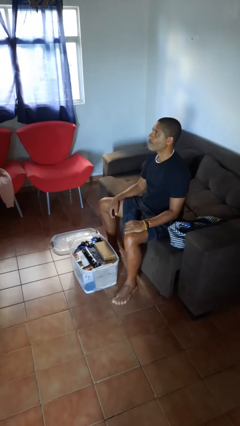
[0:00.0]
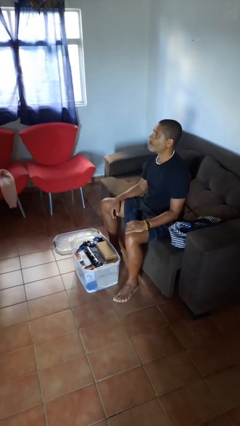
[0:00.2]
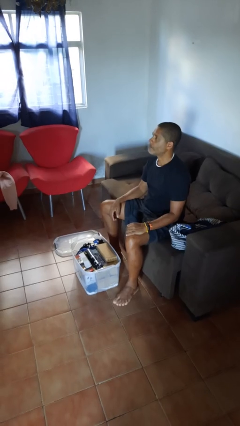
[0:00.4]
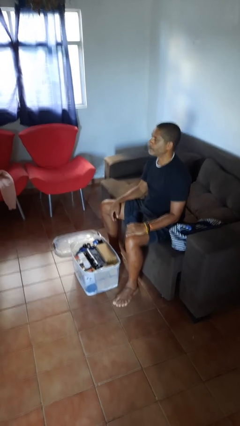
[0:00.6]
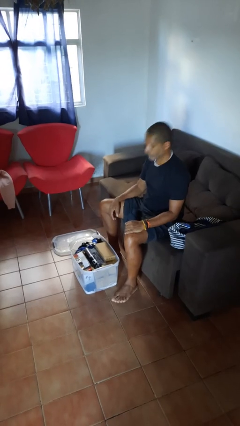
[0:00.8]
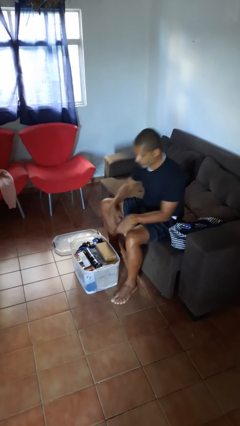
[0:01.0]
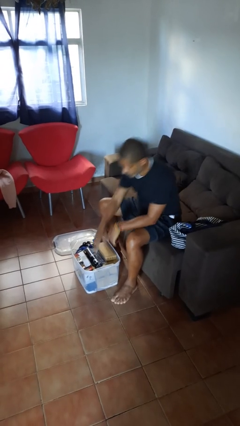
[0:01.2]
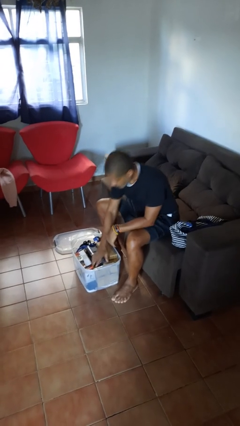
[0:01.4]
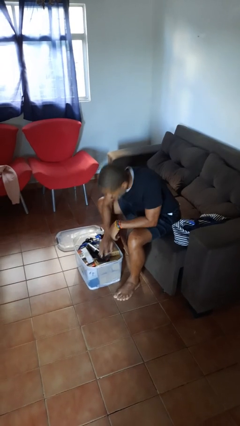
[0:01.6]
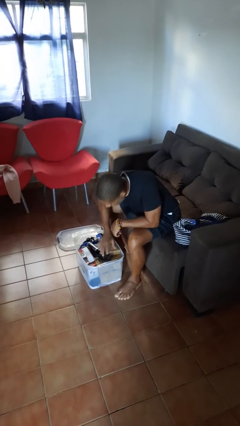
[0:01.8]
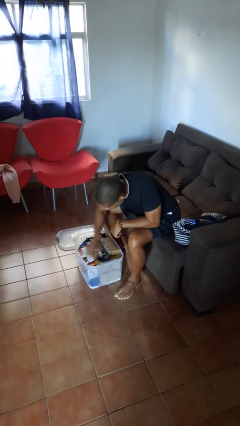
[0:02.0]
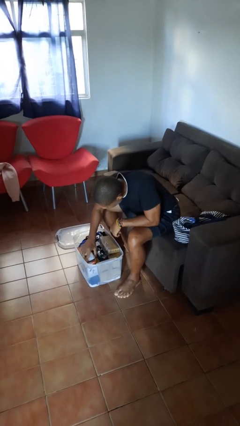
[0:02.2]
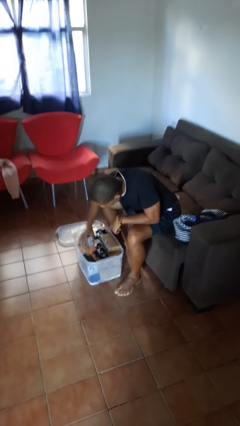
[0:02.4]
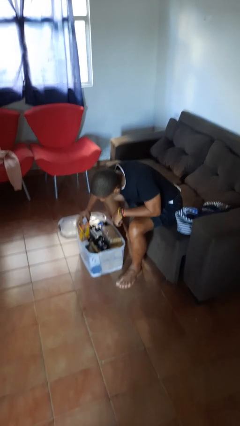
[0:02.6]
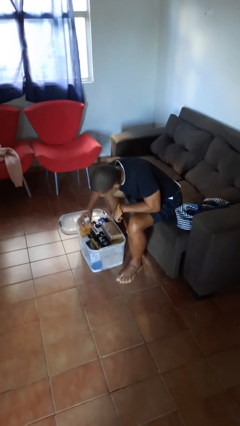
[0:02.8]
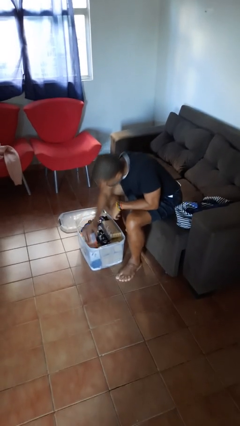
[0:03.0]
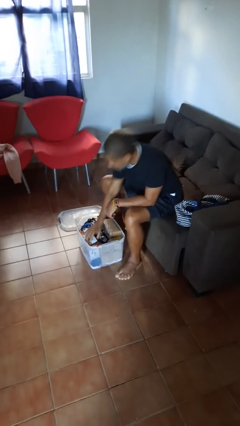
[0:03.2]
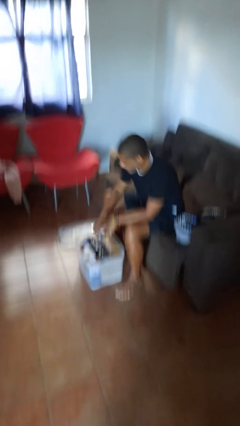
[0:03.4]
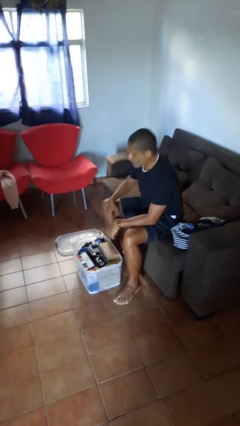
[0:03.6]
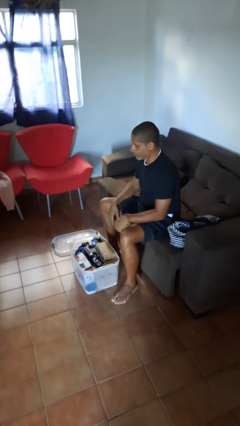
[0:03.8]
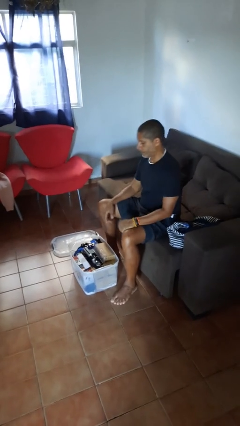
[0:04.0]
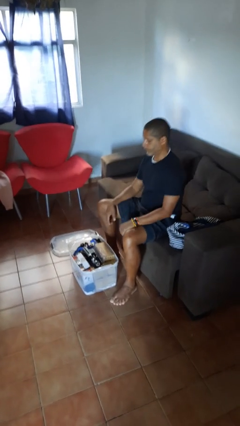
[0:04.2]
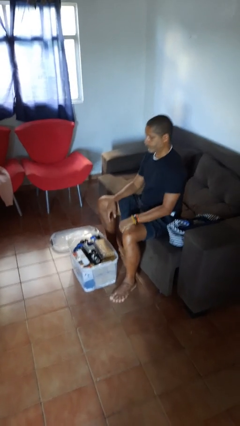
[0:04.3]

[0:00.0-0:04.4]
person searches in box

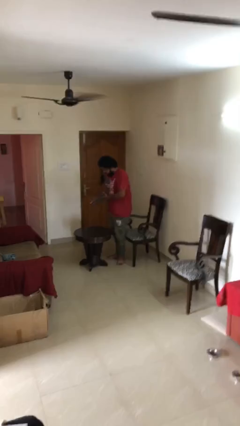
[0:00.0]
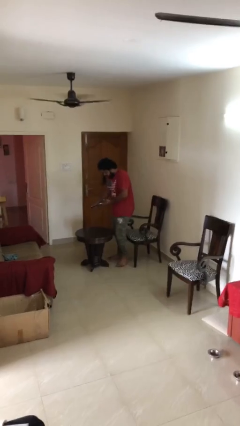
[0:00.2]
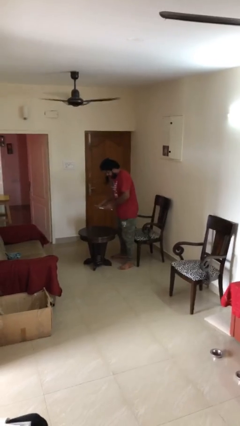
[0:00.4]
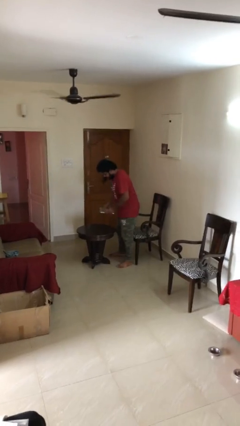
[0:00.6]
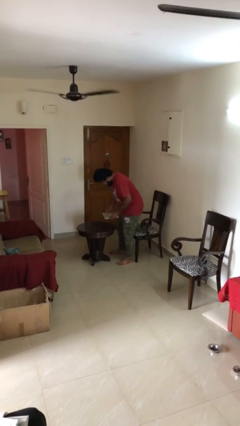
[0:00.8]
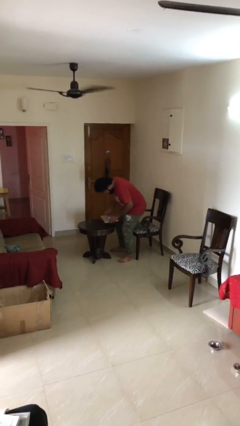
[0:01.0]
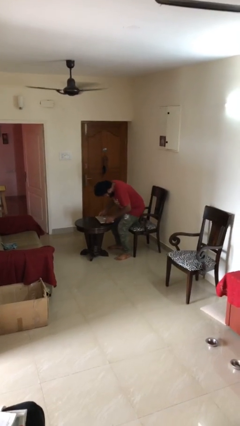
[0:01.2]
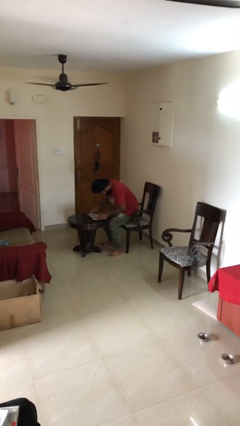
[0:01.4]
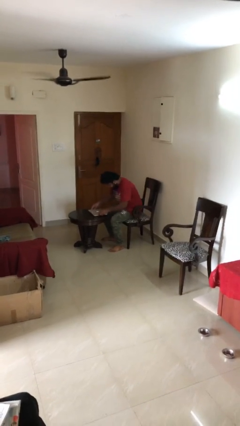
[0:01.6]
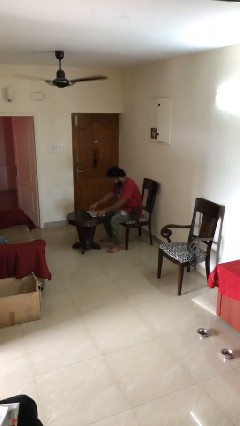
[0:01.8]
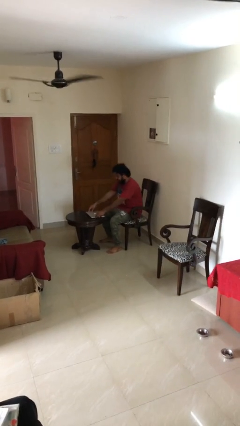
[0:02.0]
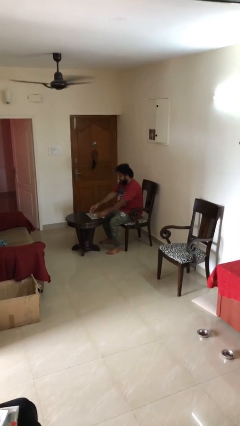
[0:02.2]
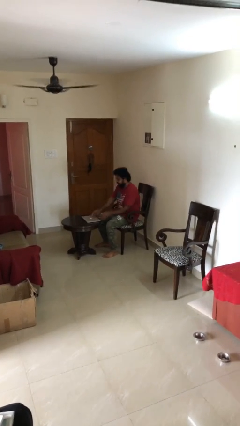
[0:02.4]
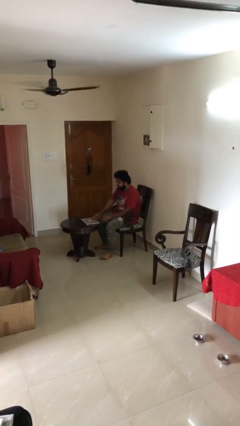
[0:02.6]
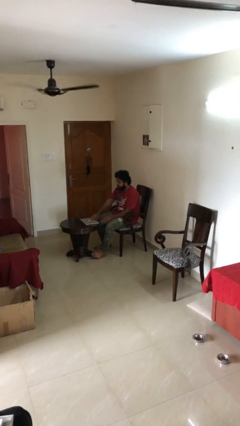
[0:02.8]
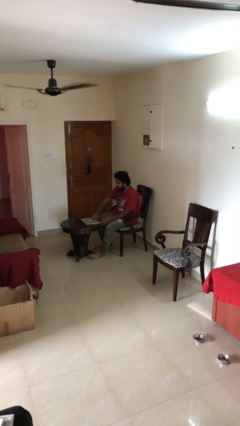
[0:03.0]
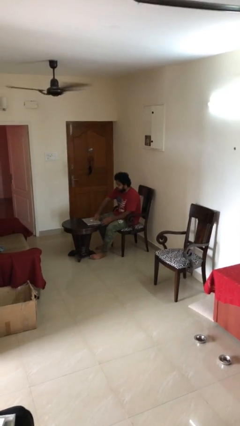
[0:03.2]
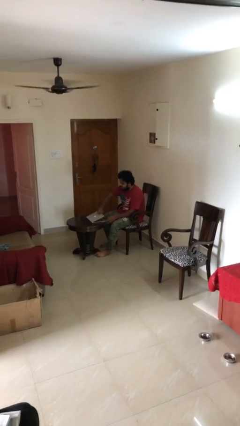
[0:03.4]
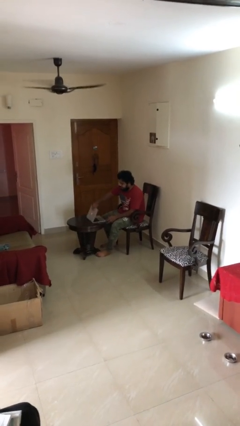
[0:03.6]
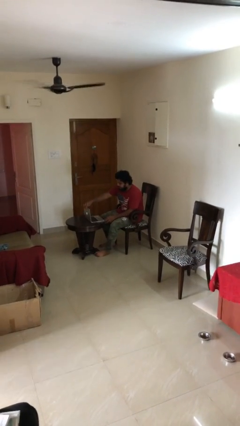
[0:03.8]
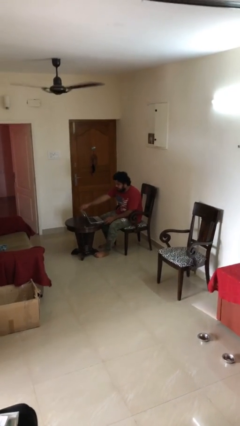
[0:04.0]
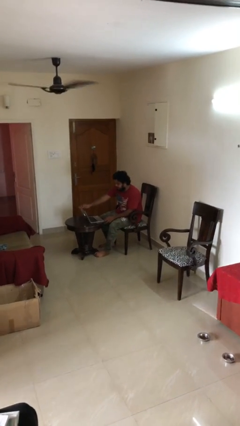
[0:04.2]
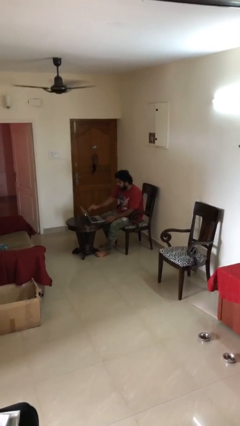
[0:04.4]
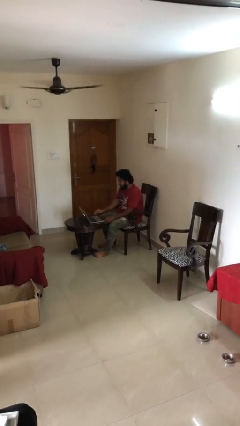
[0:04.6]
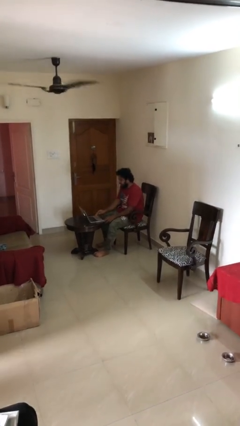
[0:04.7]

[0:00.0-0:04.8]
person sits down

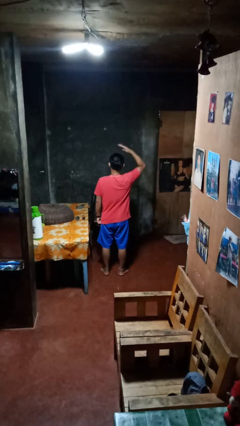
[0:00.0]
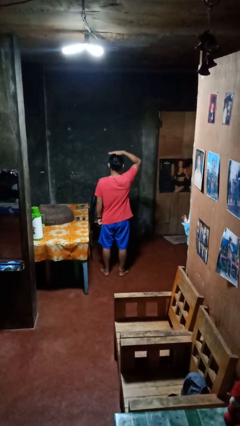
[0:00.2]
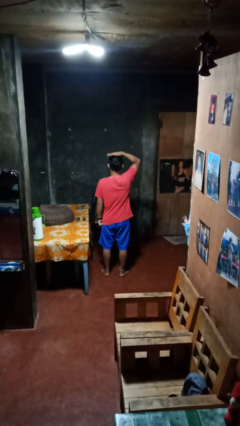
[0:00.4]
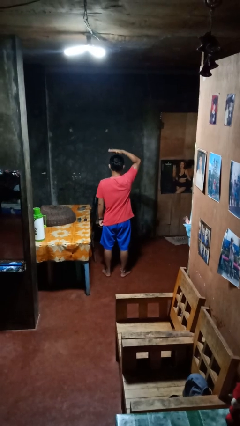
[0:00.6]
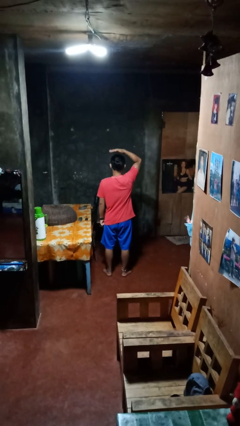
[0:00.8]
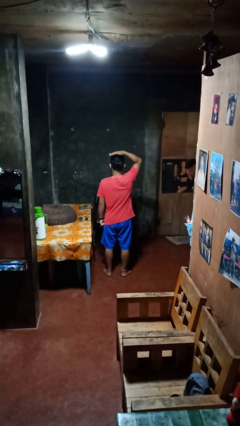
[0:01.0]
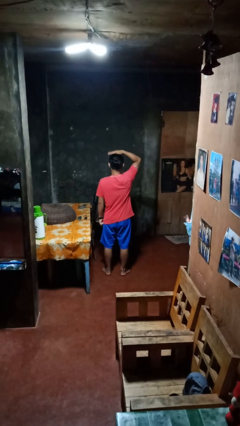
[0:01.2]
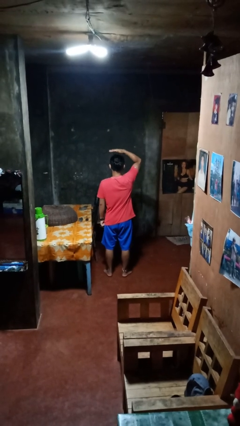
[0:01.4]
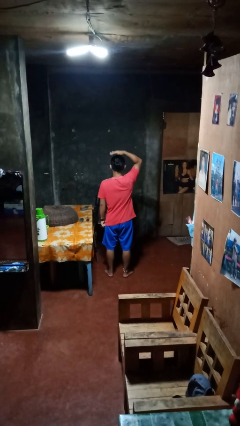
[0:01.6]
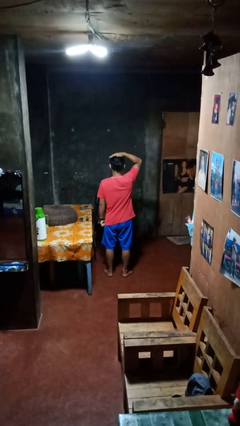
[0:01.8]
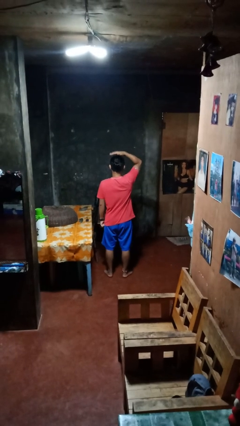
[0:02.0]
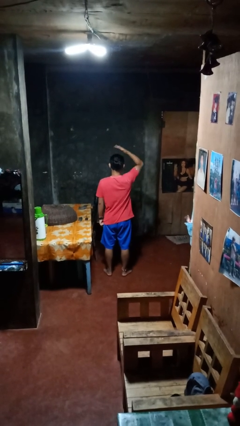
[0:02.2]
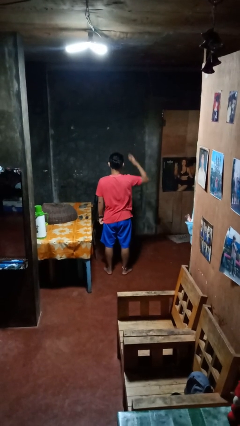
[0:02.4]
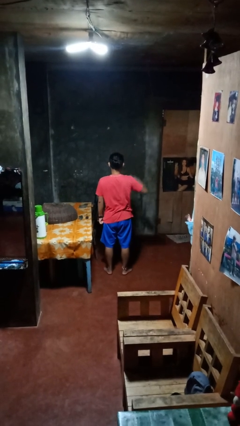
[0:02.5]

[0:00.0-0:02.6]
person pats head

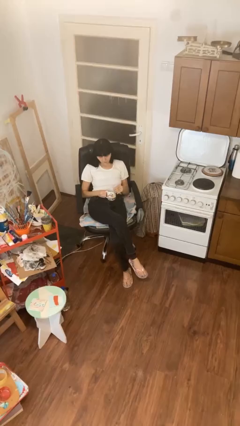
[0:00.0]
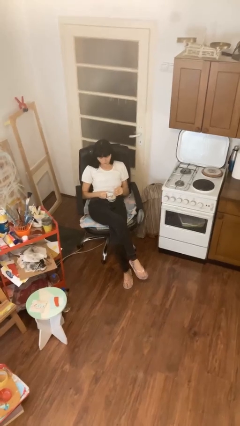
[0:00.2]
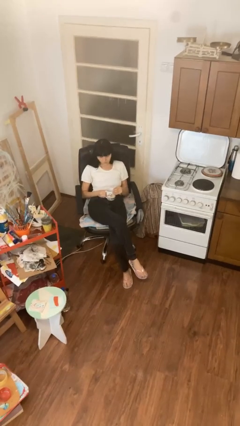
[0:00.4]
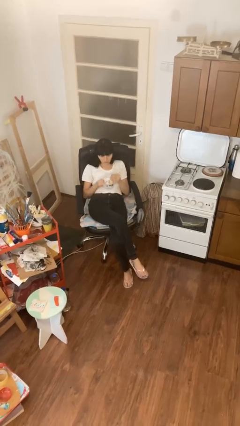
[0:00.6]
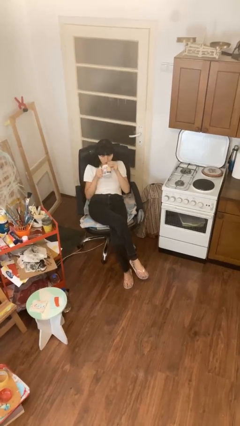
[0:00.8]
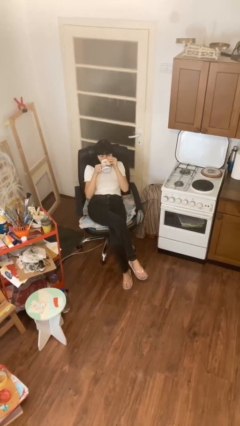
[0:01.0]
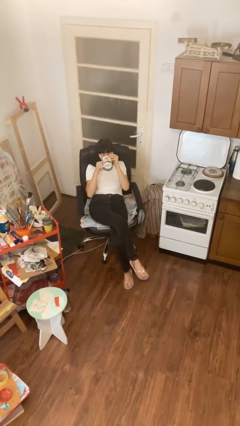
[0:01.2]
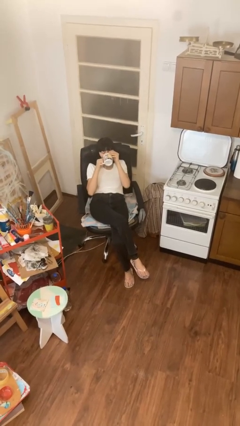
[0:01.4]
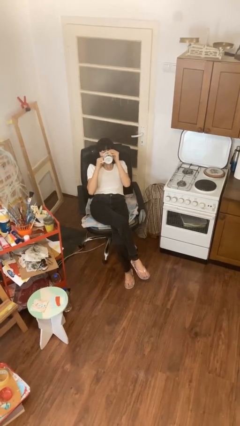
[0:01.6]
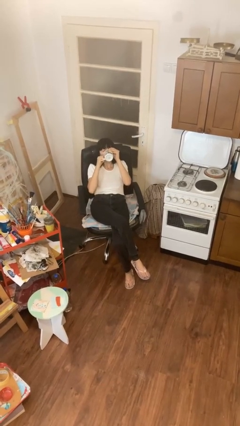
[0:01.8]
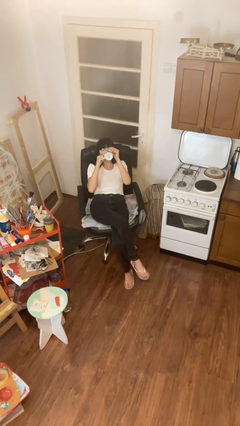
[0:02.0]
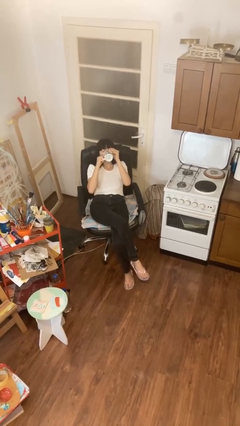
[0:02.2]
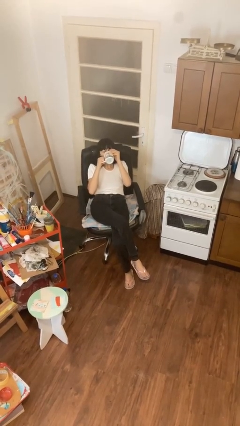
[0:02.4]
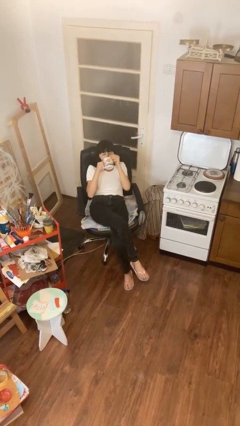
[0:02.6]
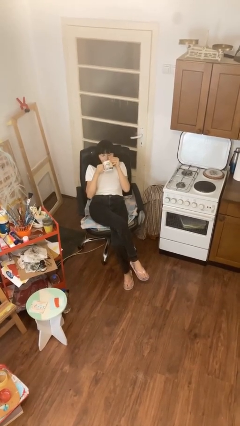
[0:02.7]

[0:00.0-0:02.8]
person drinks from mug

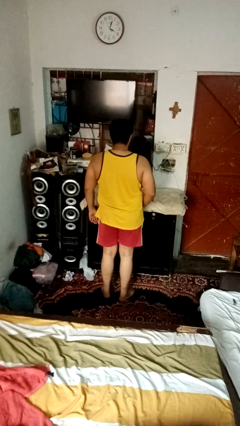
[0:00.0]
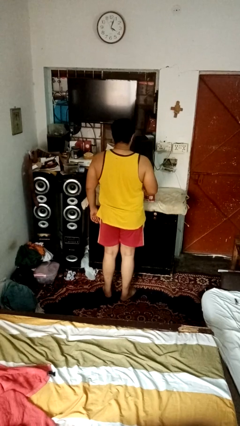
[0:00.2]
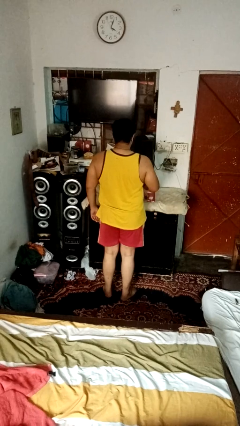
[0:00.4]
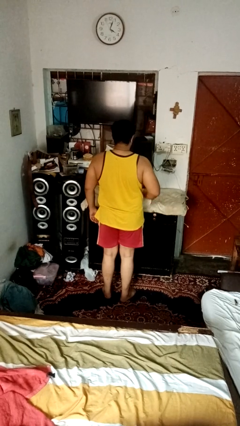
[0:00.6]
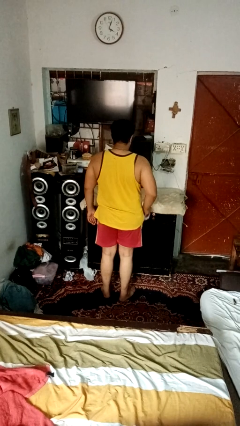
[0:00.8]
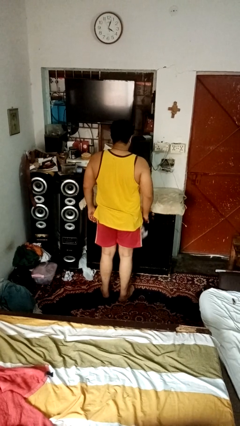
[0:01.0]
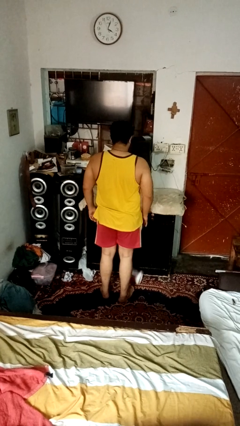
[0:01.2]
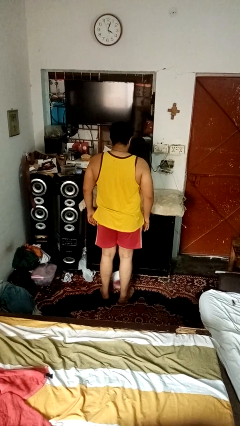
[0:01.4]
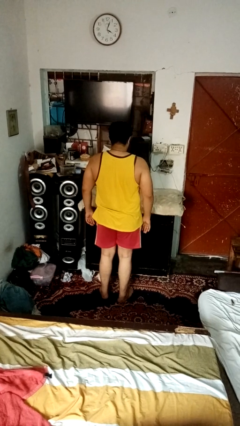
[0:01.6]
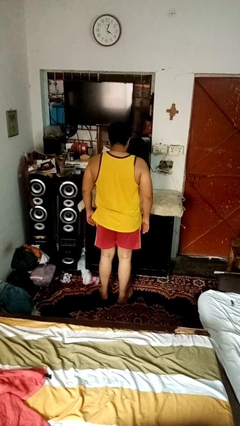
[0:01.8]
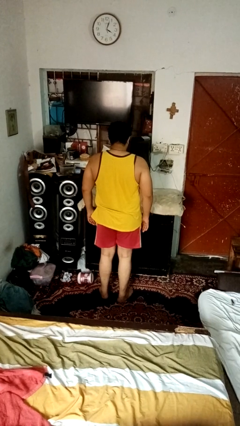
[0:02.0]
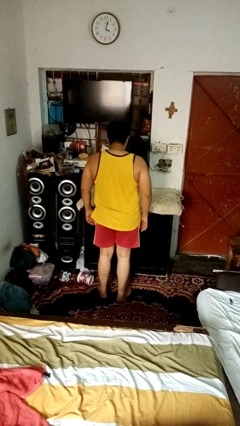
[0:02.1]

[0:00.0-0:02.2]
person knocks over furniture

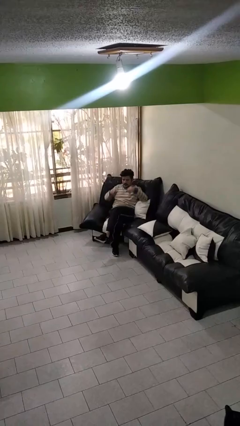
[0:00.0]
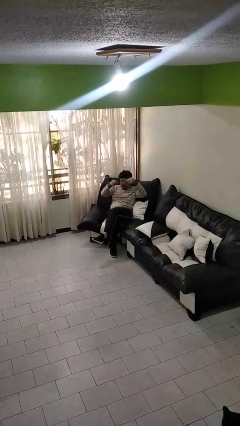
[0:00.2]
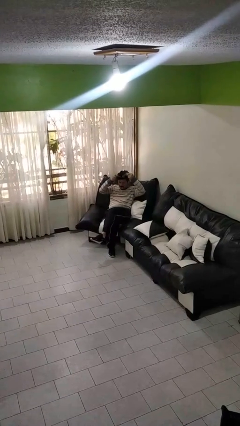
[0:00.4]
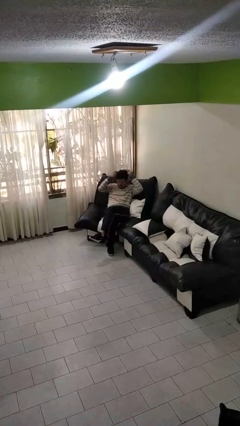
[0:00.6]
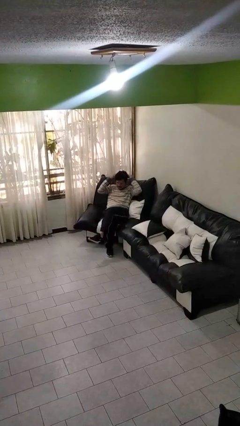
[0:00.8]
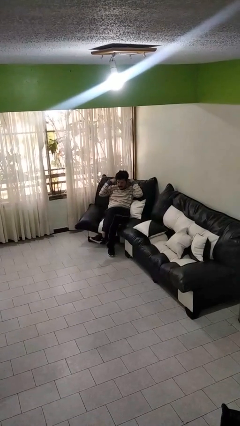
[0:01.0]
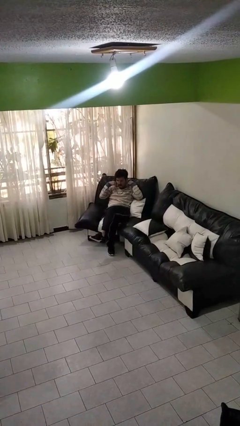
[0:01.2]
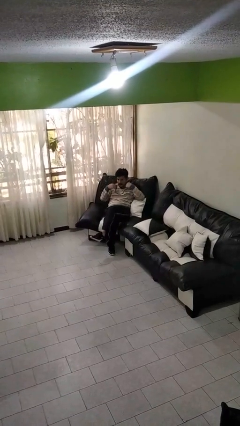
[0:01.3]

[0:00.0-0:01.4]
person puts on necklace
